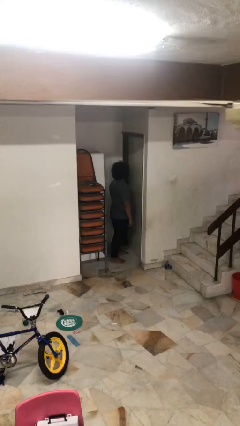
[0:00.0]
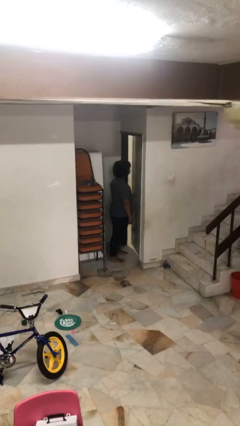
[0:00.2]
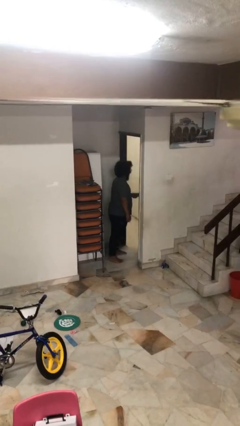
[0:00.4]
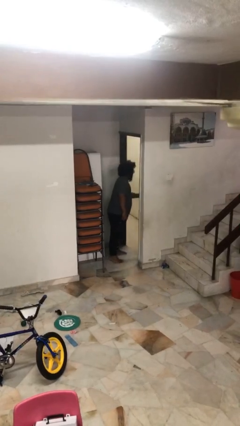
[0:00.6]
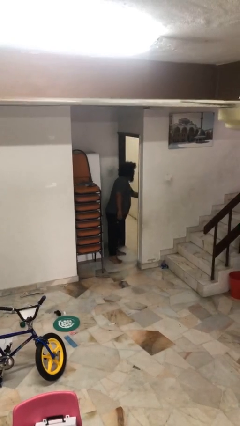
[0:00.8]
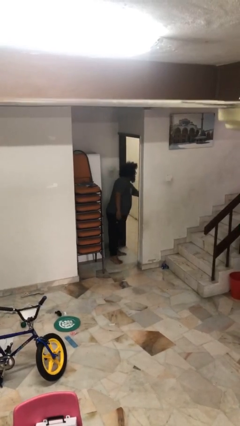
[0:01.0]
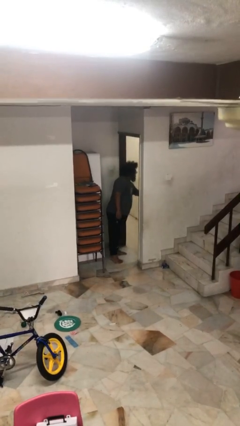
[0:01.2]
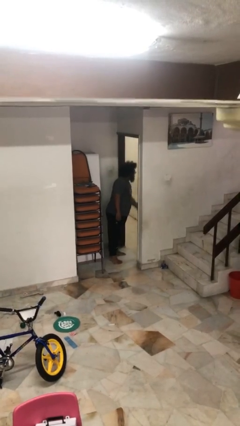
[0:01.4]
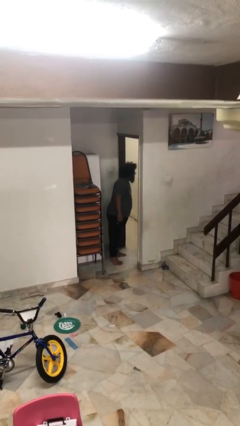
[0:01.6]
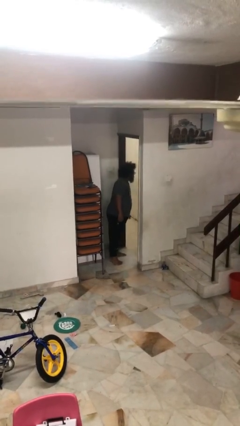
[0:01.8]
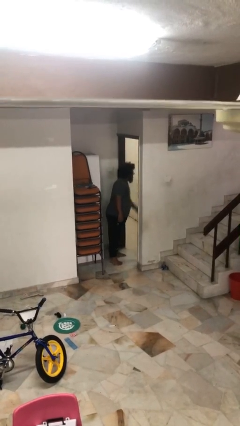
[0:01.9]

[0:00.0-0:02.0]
person opens facility door

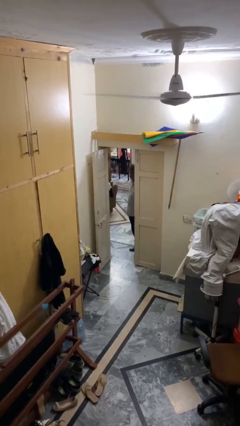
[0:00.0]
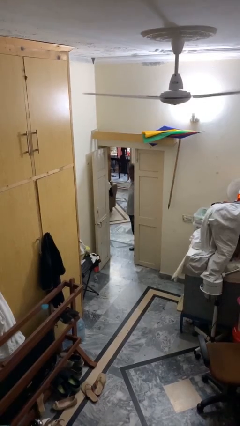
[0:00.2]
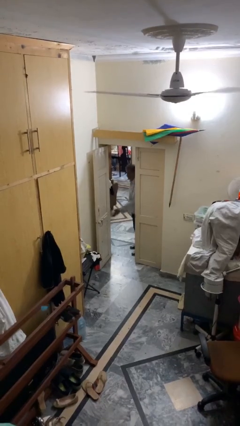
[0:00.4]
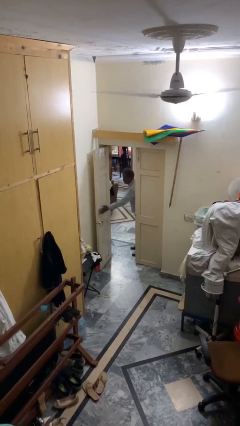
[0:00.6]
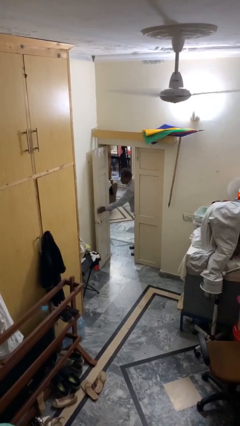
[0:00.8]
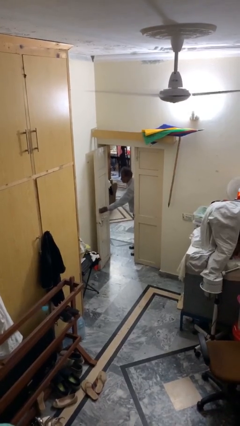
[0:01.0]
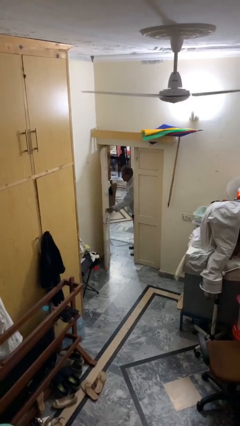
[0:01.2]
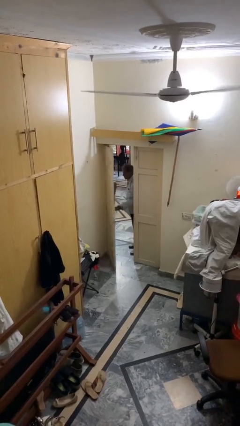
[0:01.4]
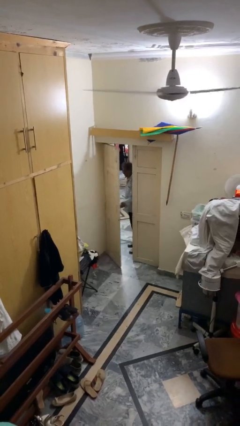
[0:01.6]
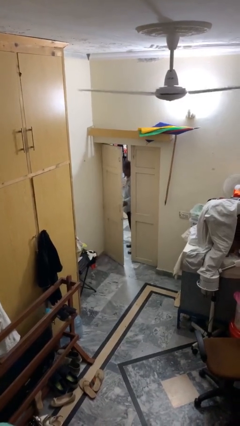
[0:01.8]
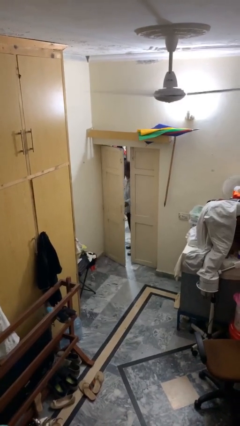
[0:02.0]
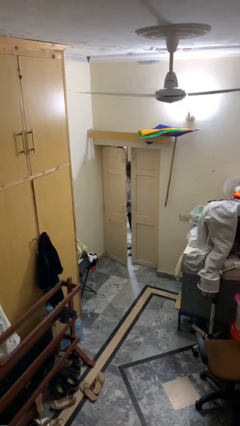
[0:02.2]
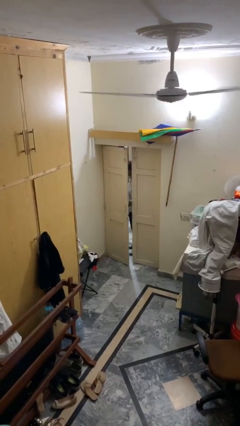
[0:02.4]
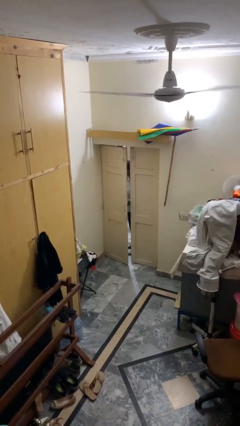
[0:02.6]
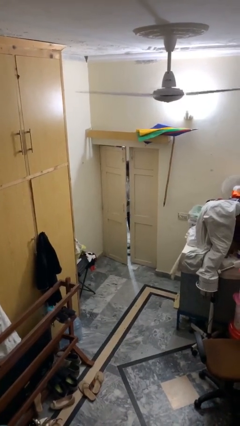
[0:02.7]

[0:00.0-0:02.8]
person closes facility door

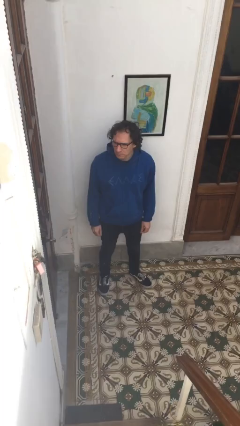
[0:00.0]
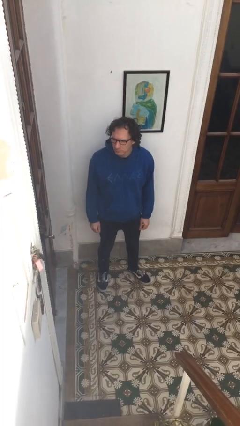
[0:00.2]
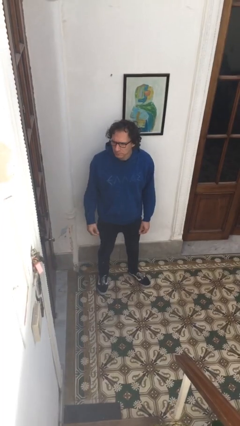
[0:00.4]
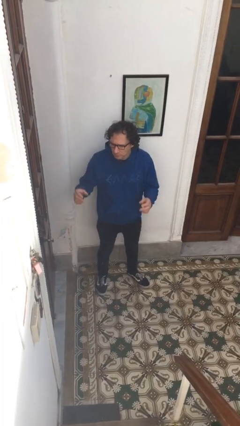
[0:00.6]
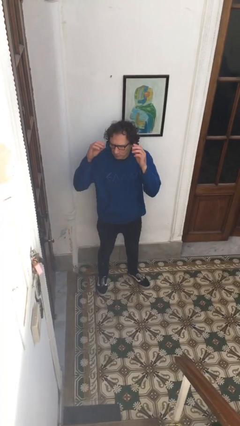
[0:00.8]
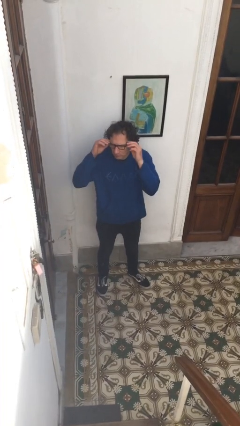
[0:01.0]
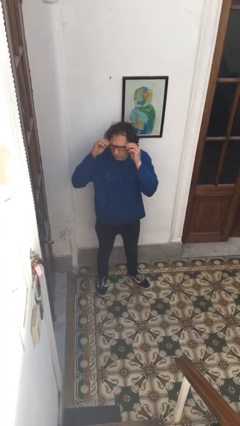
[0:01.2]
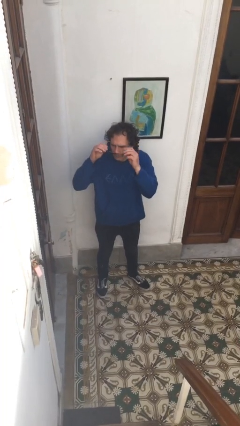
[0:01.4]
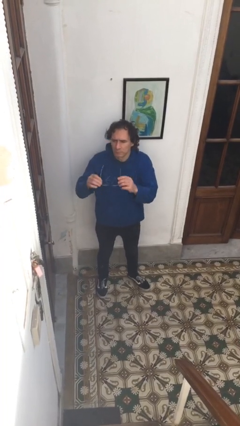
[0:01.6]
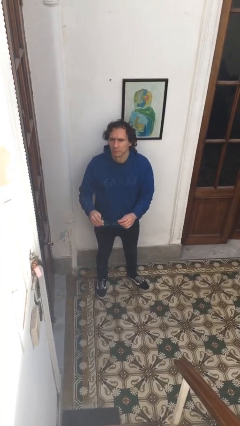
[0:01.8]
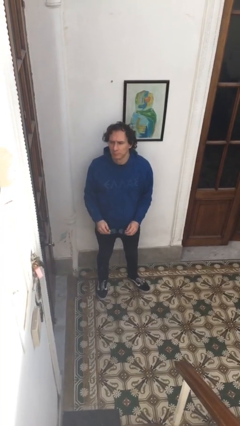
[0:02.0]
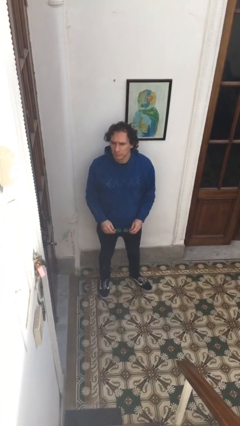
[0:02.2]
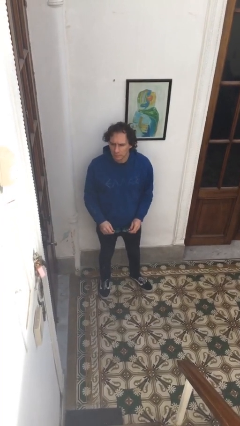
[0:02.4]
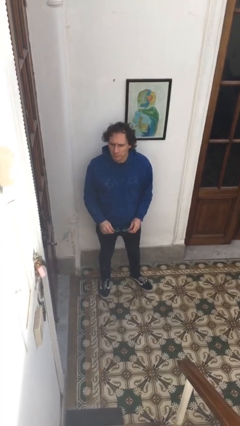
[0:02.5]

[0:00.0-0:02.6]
person takes off glasses

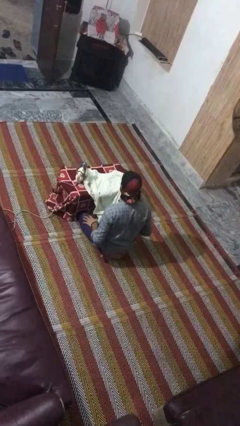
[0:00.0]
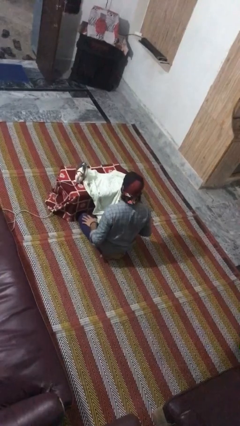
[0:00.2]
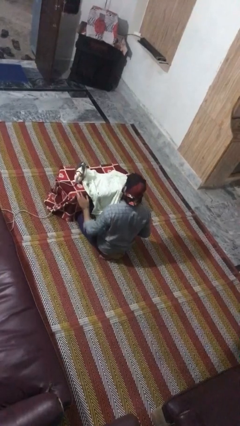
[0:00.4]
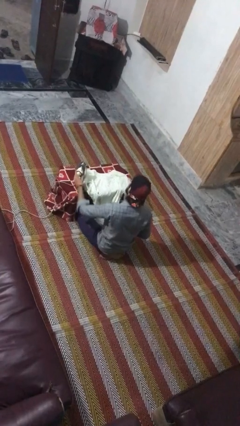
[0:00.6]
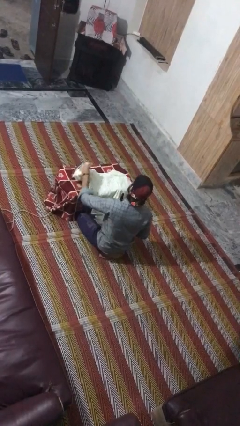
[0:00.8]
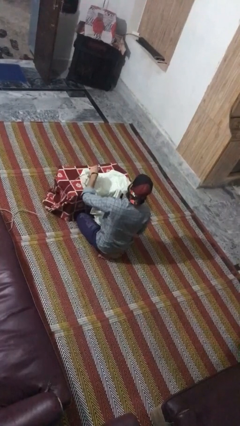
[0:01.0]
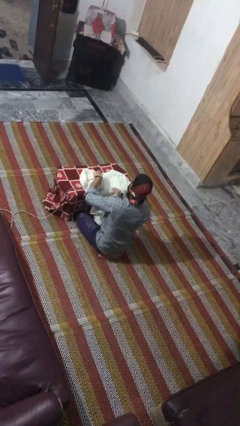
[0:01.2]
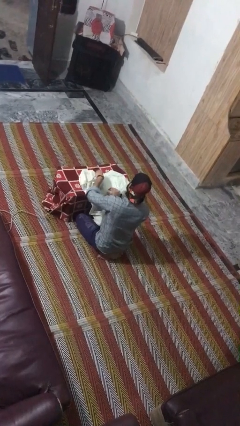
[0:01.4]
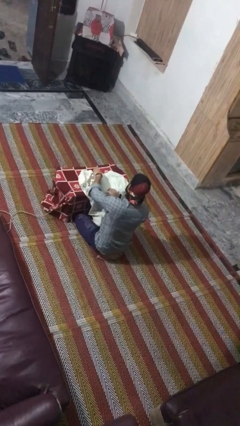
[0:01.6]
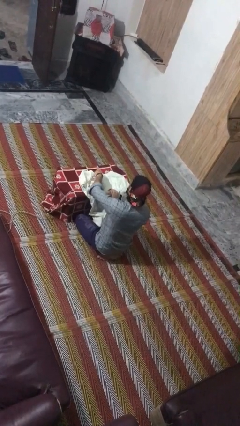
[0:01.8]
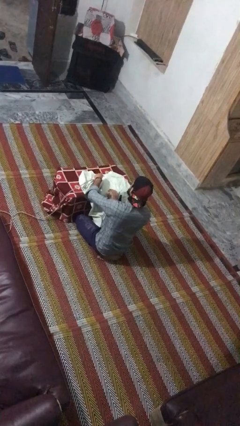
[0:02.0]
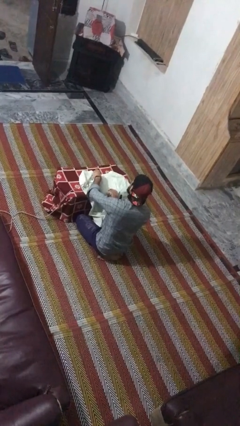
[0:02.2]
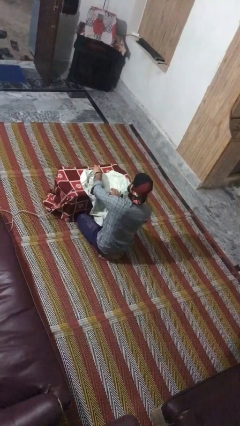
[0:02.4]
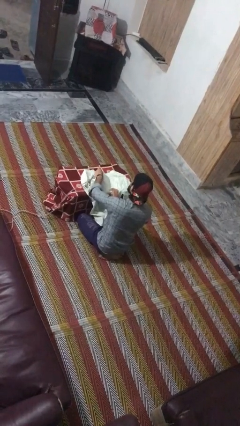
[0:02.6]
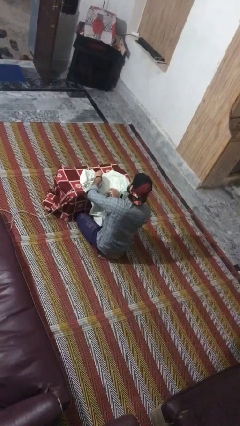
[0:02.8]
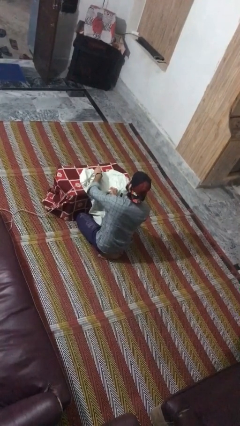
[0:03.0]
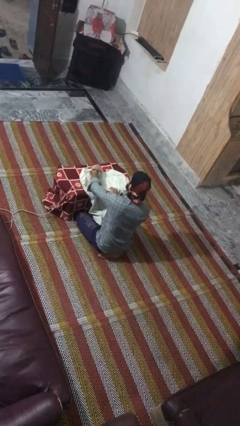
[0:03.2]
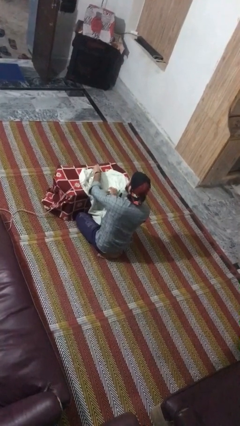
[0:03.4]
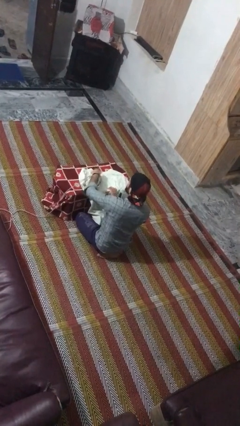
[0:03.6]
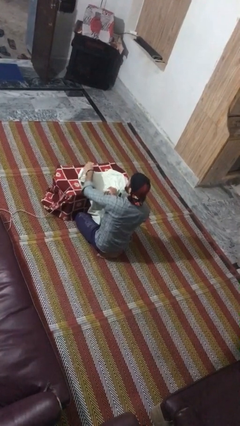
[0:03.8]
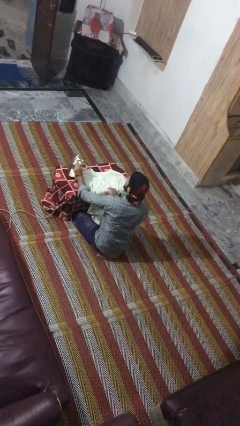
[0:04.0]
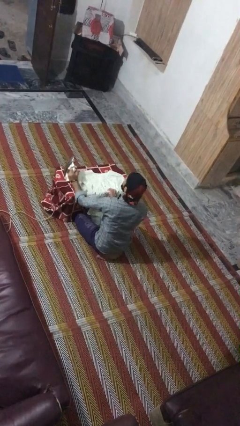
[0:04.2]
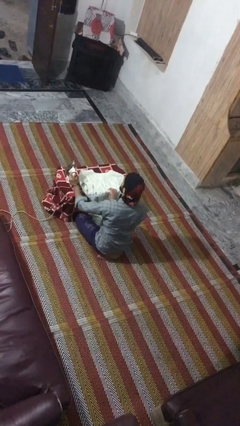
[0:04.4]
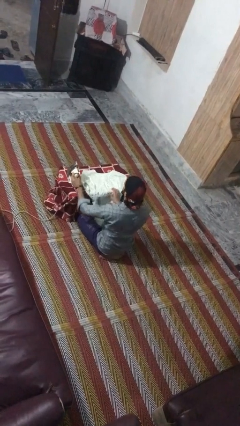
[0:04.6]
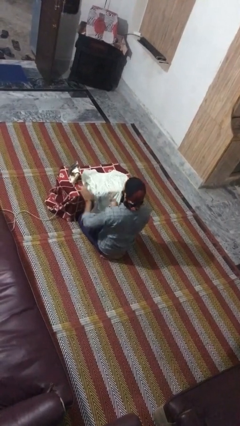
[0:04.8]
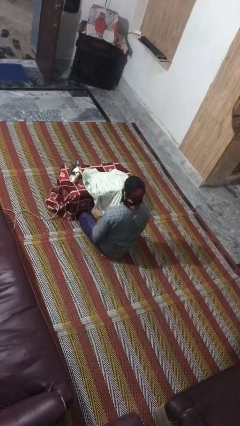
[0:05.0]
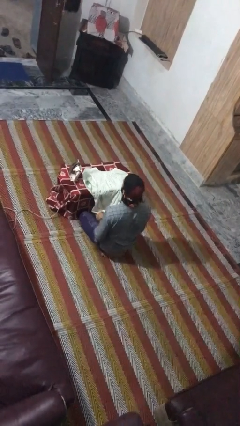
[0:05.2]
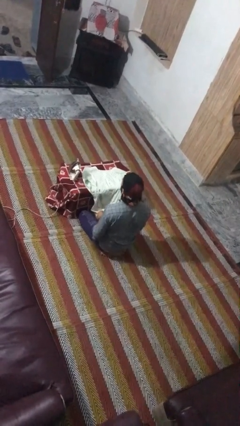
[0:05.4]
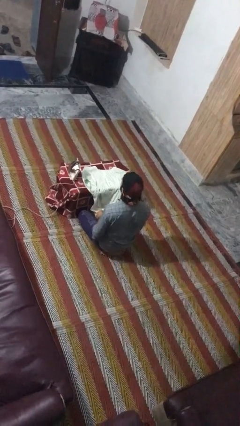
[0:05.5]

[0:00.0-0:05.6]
person irons clothes

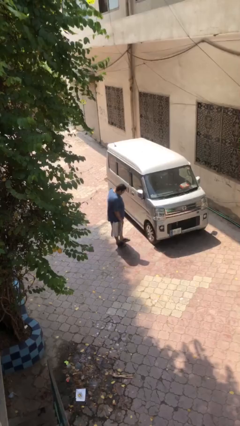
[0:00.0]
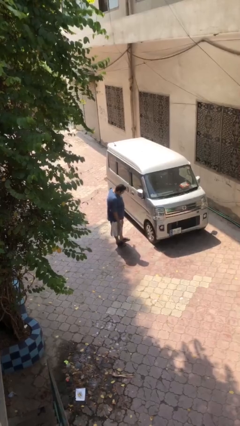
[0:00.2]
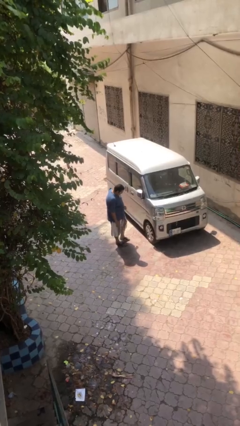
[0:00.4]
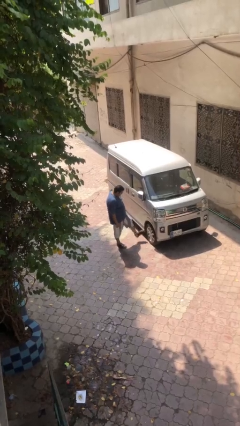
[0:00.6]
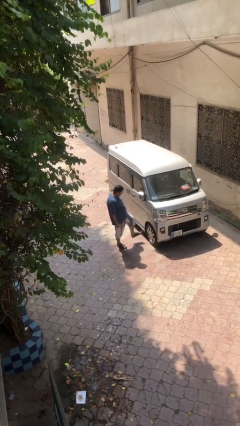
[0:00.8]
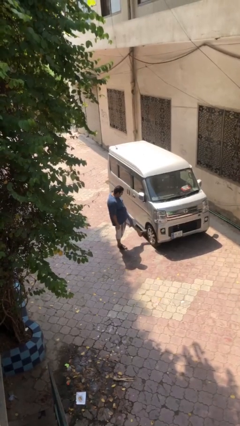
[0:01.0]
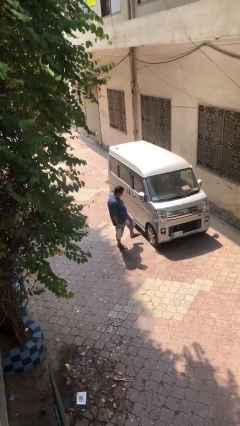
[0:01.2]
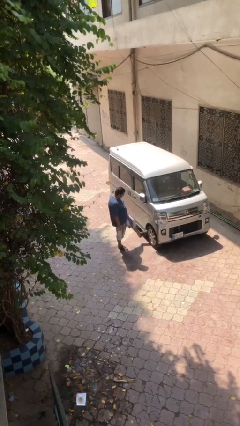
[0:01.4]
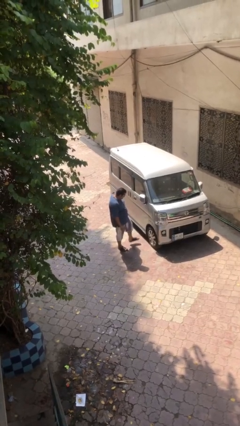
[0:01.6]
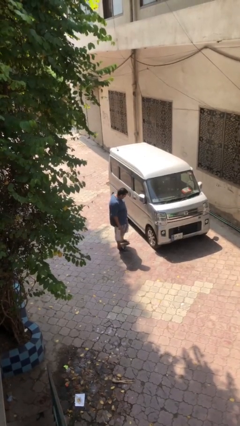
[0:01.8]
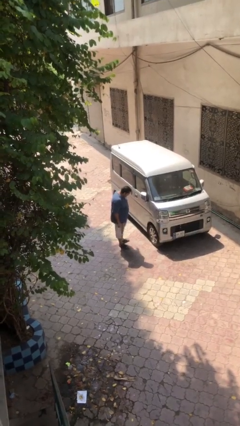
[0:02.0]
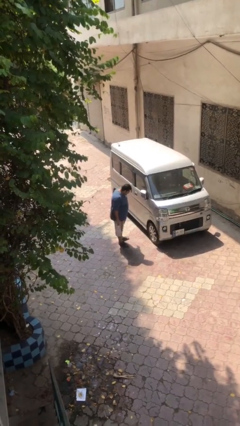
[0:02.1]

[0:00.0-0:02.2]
person kicks car tires

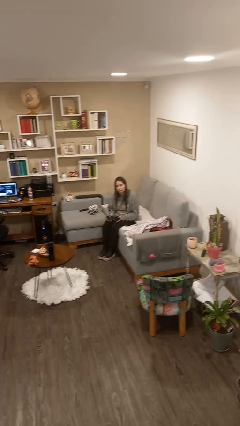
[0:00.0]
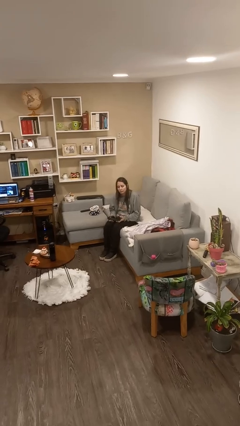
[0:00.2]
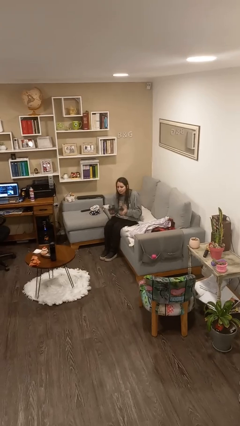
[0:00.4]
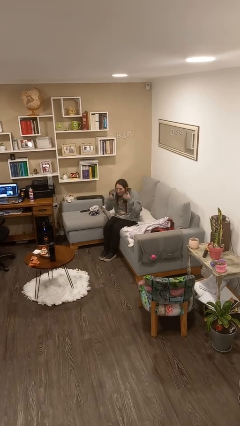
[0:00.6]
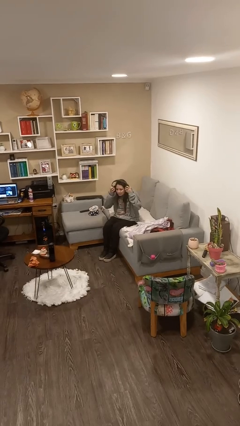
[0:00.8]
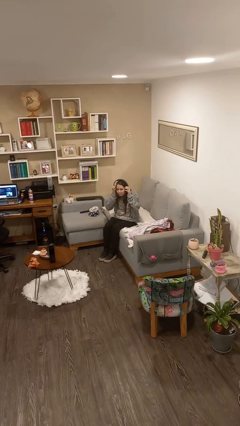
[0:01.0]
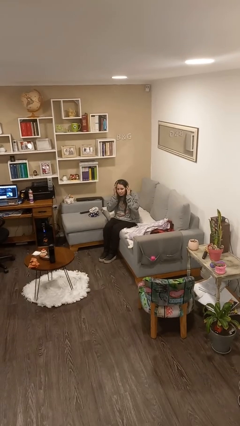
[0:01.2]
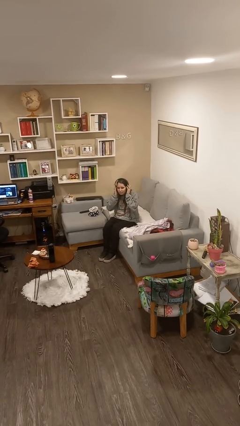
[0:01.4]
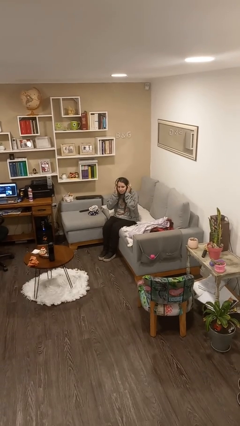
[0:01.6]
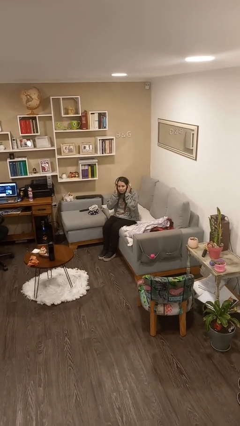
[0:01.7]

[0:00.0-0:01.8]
person puts on headphones

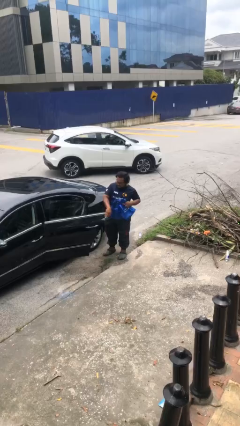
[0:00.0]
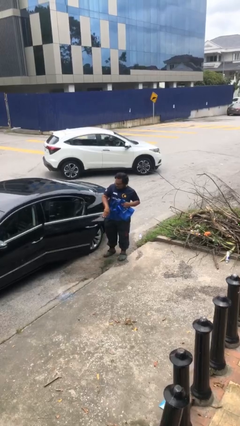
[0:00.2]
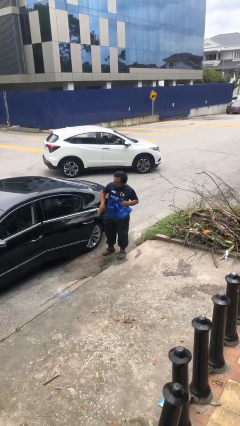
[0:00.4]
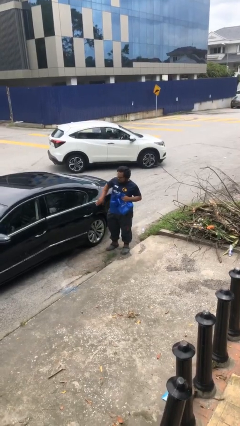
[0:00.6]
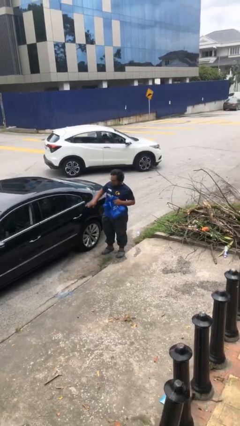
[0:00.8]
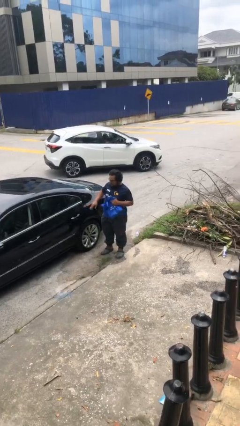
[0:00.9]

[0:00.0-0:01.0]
person closes car door
